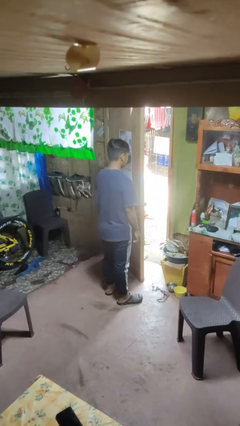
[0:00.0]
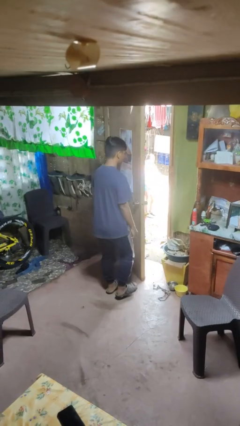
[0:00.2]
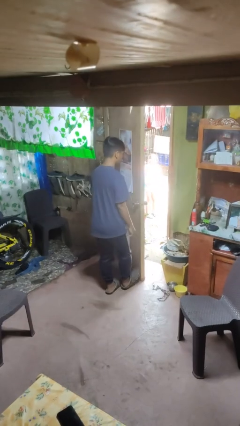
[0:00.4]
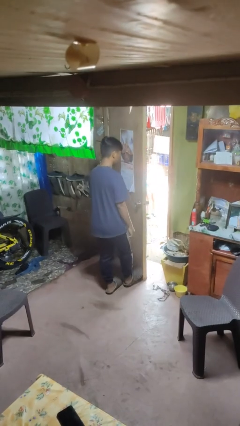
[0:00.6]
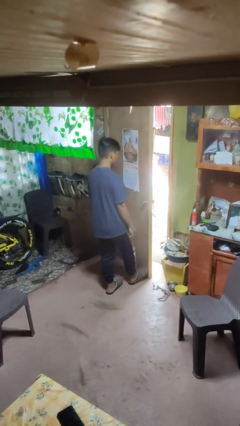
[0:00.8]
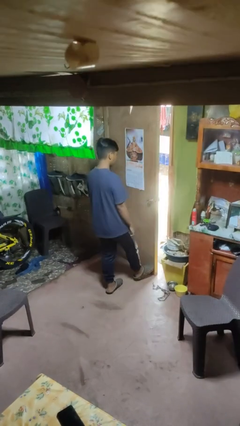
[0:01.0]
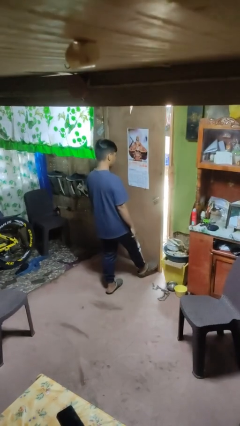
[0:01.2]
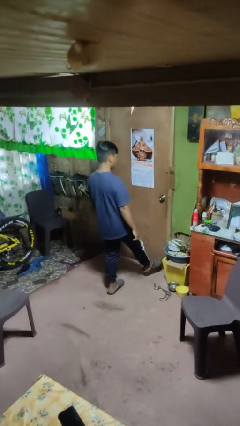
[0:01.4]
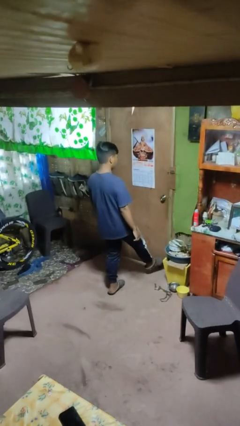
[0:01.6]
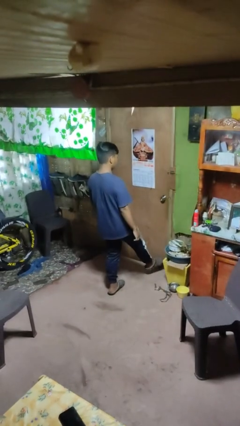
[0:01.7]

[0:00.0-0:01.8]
person closes door with foot

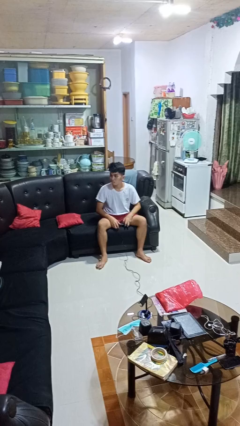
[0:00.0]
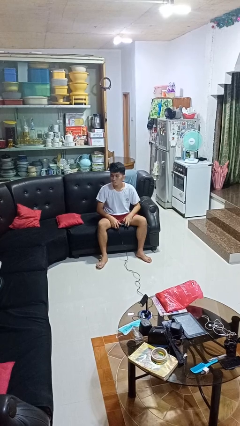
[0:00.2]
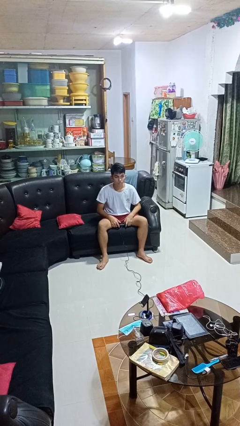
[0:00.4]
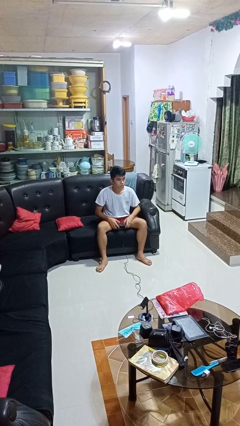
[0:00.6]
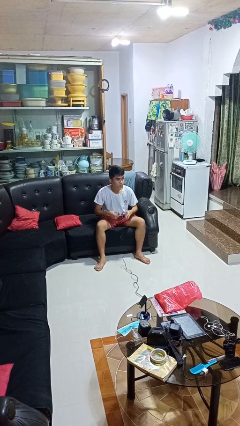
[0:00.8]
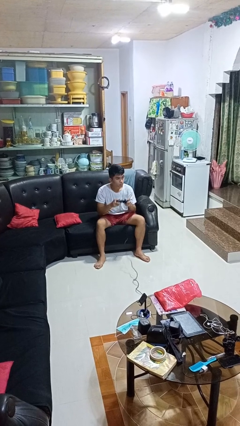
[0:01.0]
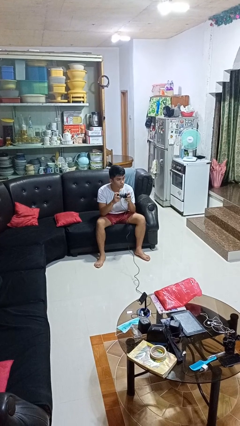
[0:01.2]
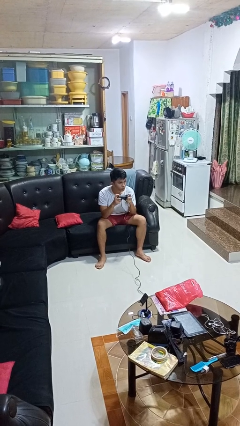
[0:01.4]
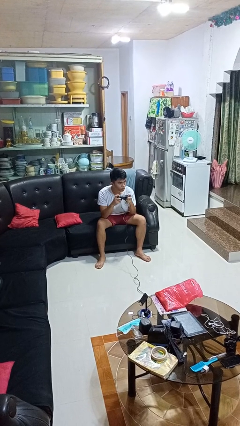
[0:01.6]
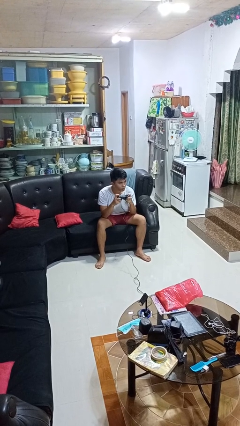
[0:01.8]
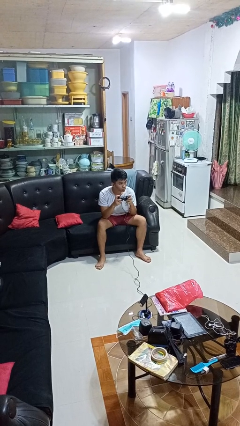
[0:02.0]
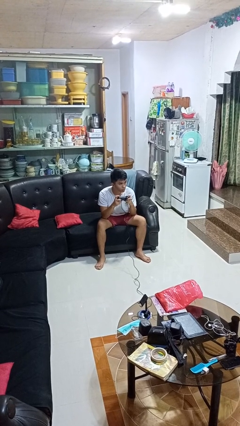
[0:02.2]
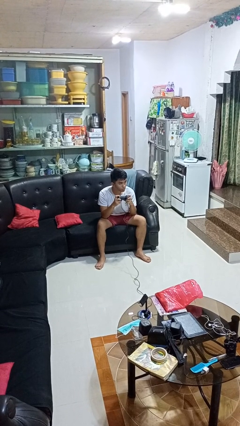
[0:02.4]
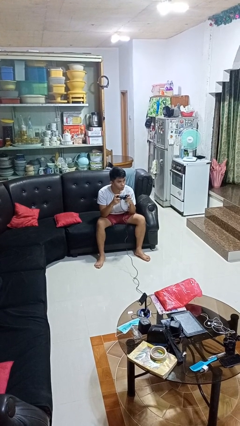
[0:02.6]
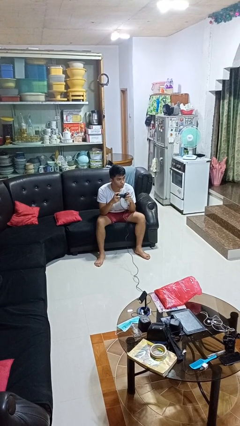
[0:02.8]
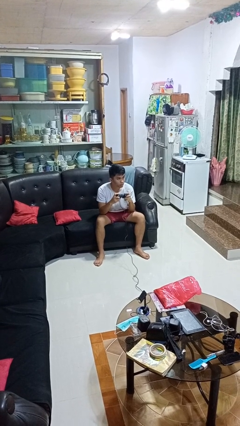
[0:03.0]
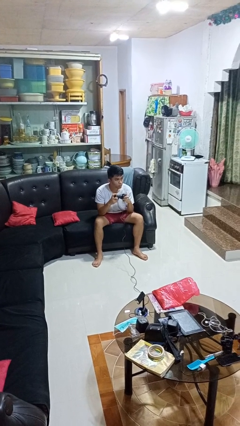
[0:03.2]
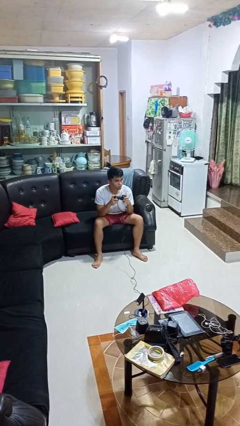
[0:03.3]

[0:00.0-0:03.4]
person interacts with handheld game

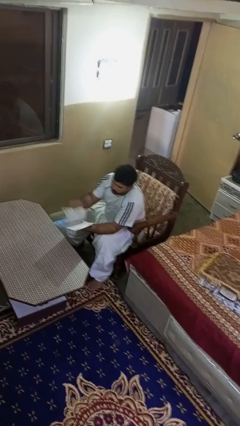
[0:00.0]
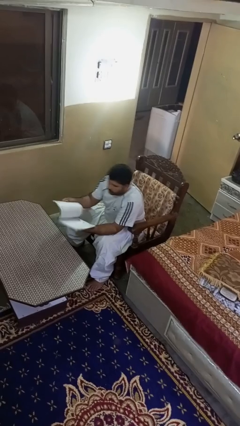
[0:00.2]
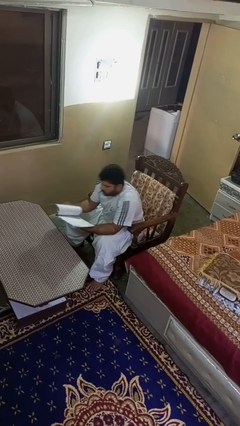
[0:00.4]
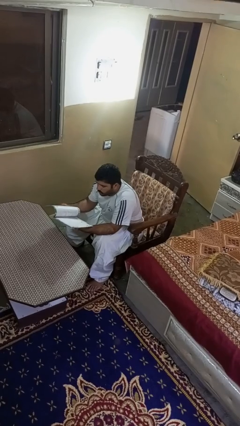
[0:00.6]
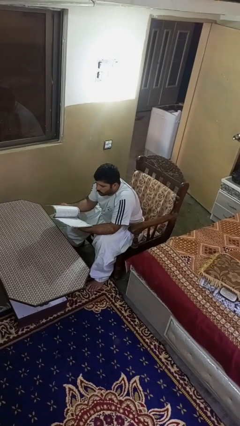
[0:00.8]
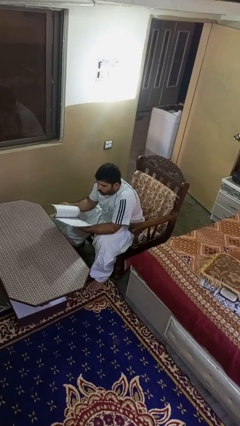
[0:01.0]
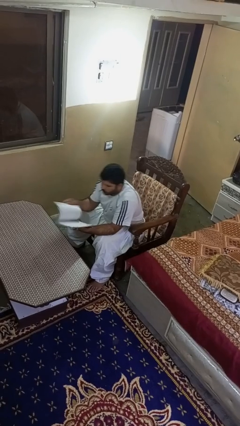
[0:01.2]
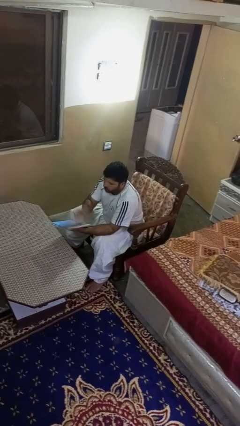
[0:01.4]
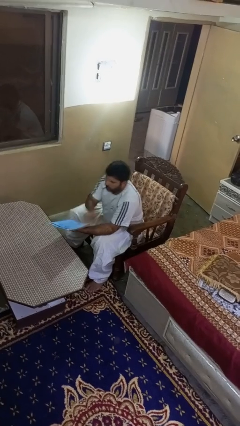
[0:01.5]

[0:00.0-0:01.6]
person reads magazine

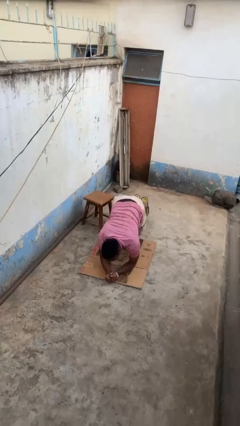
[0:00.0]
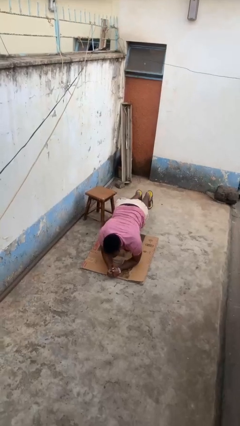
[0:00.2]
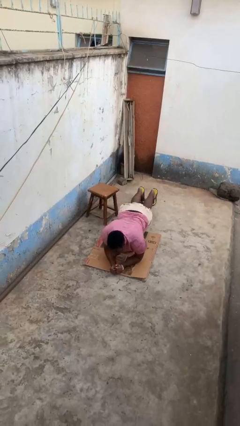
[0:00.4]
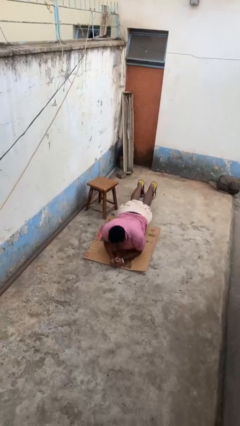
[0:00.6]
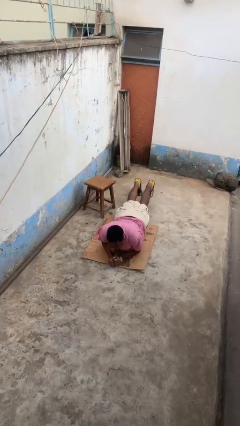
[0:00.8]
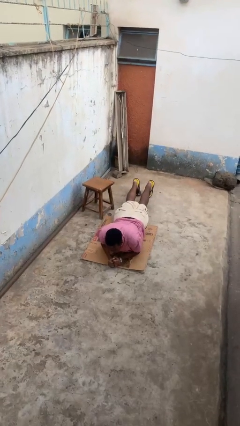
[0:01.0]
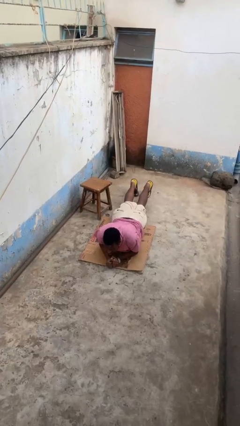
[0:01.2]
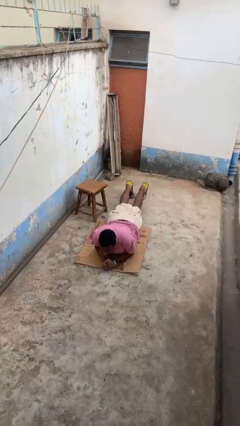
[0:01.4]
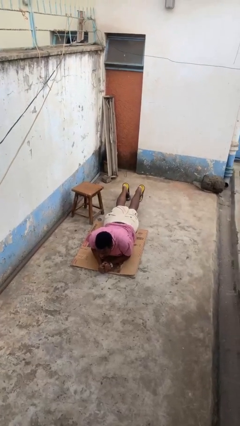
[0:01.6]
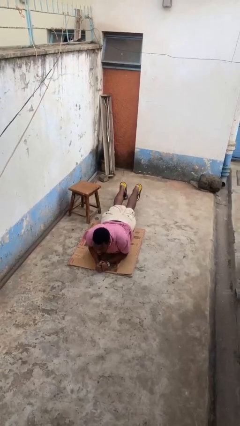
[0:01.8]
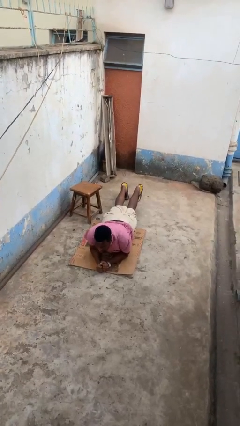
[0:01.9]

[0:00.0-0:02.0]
person lies down on floor

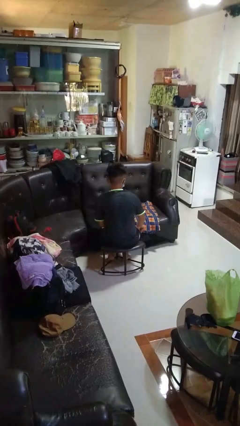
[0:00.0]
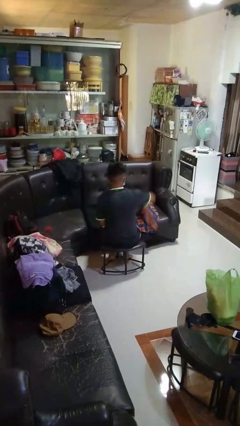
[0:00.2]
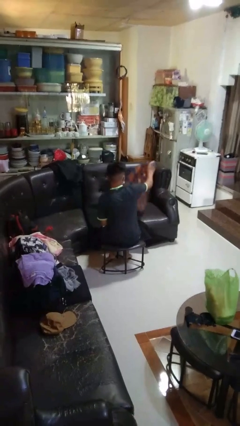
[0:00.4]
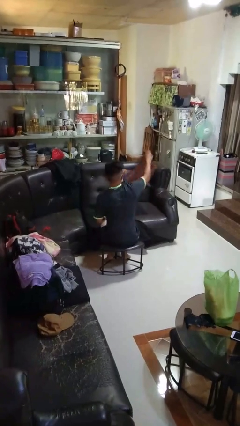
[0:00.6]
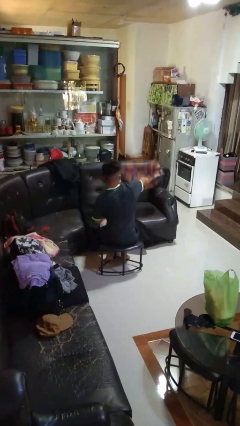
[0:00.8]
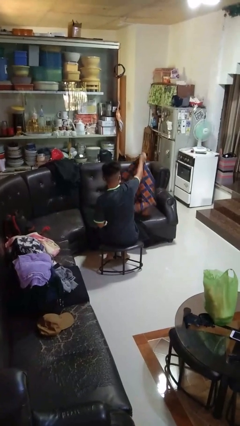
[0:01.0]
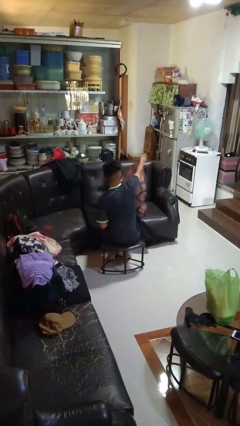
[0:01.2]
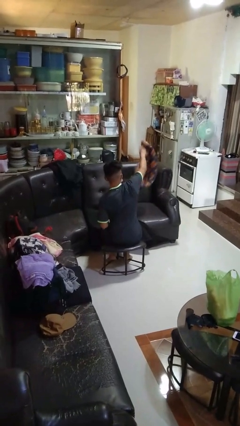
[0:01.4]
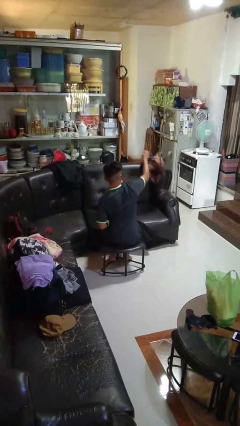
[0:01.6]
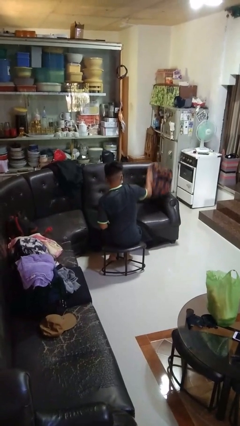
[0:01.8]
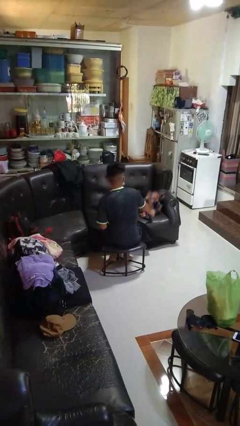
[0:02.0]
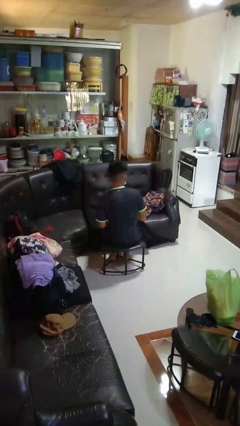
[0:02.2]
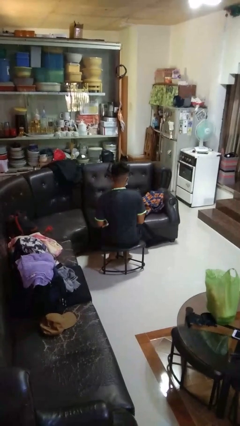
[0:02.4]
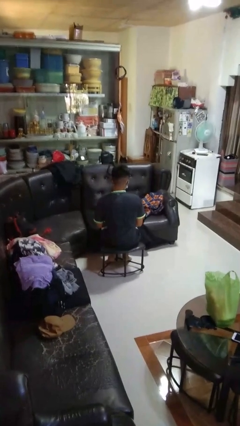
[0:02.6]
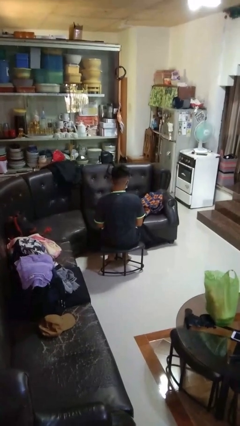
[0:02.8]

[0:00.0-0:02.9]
person unfolds blanket

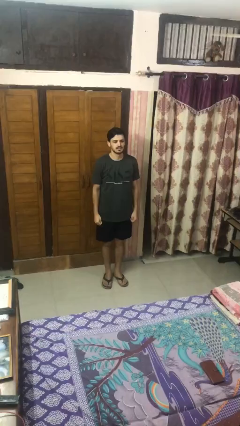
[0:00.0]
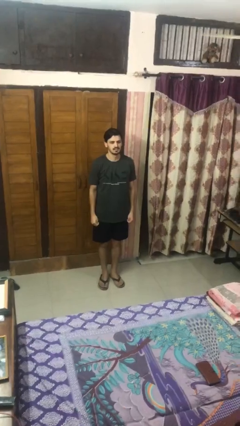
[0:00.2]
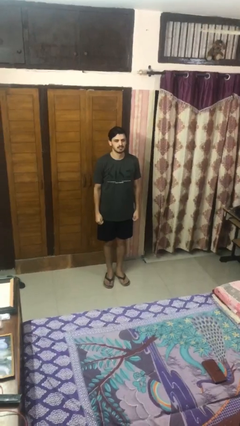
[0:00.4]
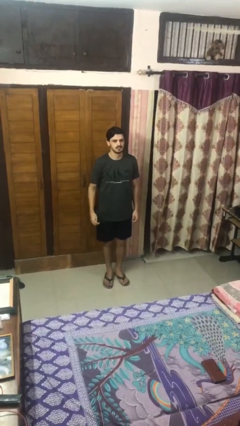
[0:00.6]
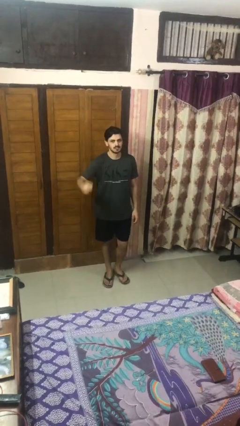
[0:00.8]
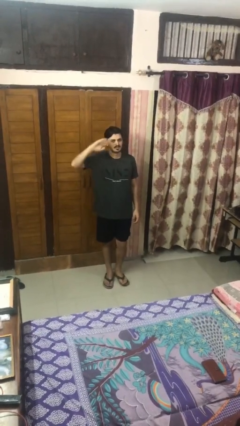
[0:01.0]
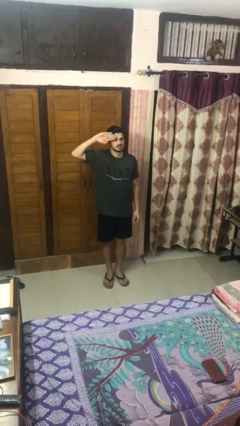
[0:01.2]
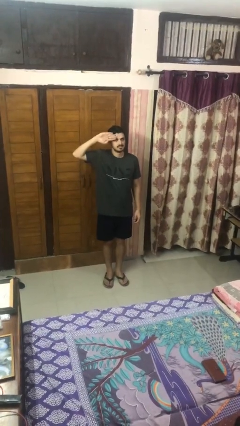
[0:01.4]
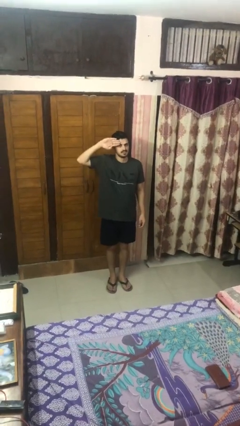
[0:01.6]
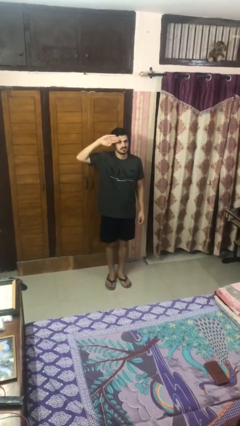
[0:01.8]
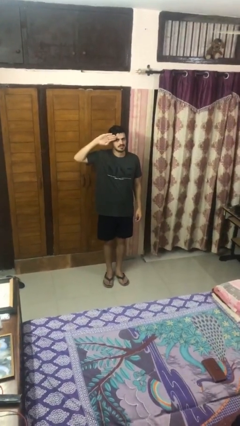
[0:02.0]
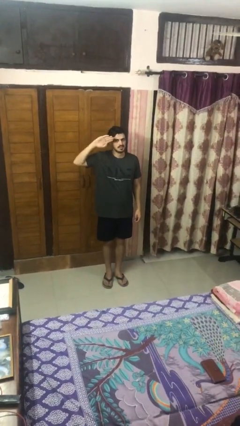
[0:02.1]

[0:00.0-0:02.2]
person salutes

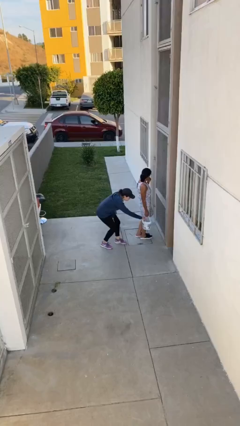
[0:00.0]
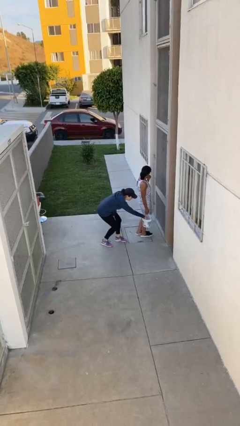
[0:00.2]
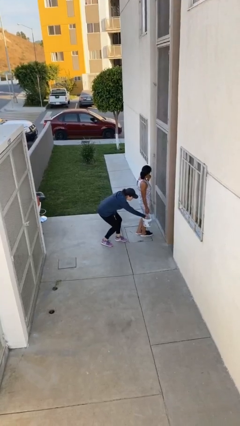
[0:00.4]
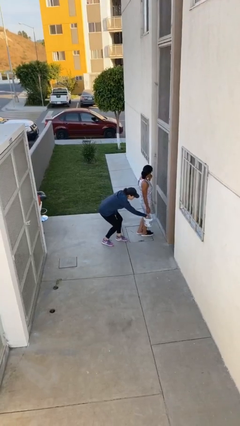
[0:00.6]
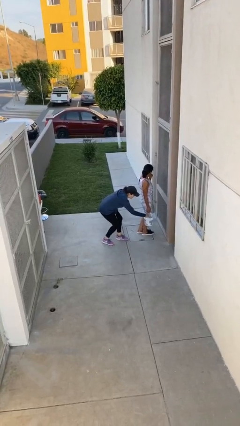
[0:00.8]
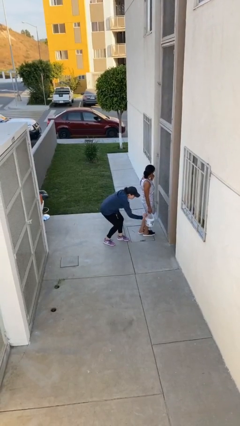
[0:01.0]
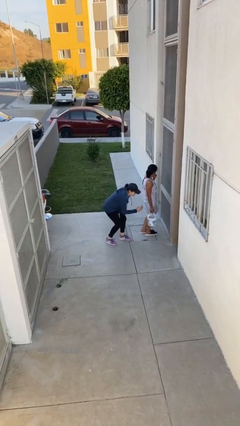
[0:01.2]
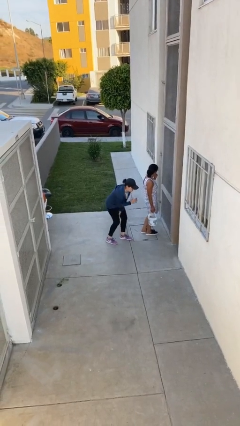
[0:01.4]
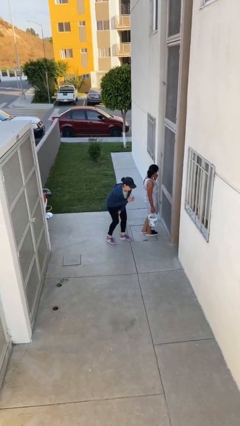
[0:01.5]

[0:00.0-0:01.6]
person steals object from person

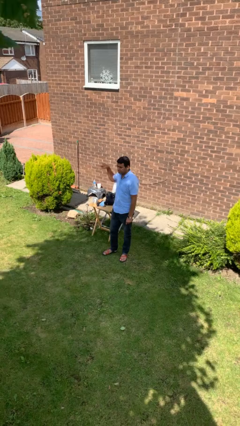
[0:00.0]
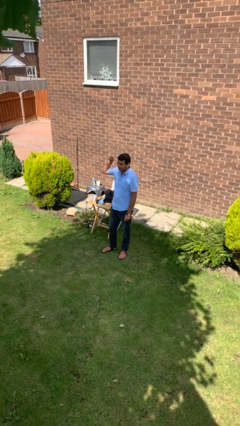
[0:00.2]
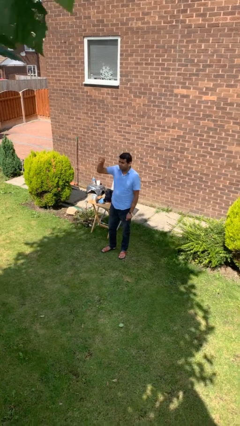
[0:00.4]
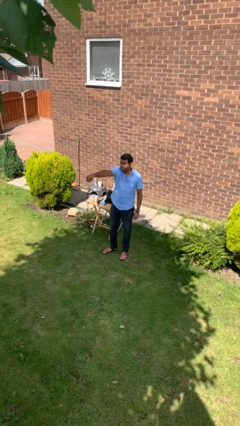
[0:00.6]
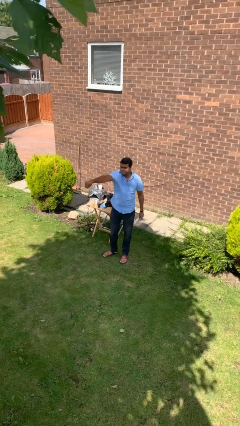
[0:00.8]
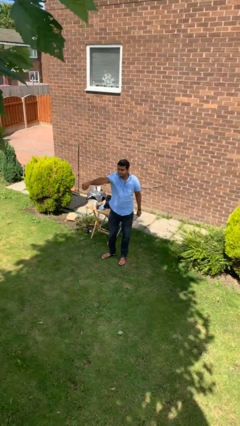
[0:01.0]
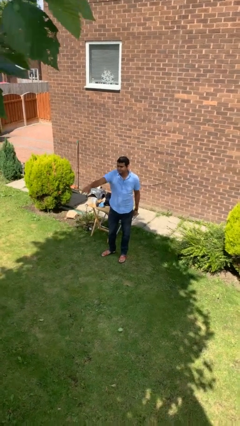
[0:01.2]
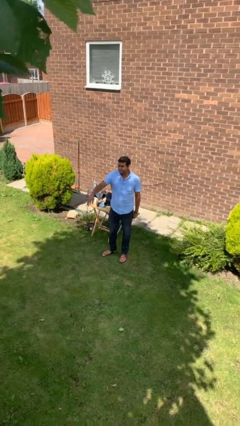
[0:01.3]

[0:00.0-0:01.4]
person punches

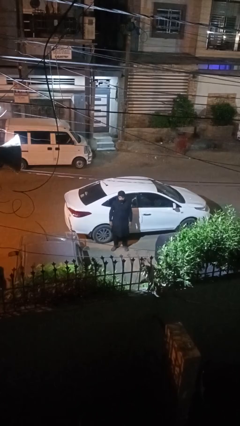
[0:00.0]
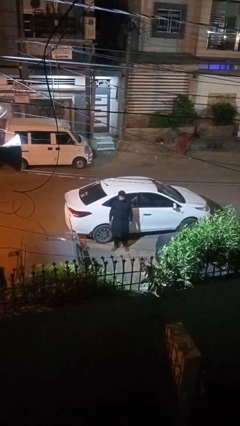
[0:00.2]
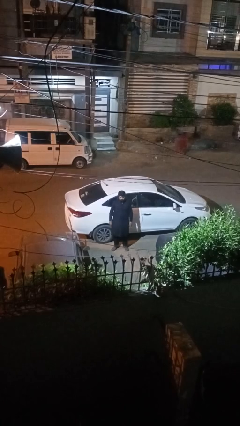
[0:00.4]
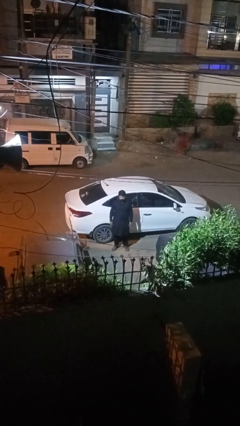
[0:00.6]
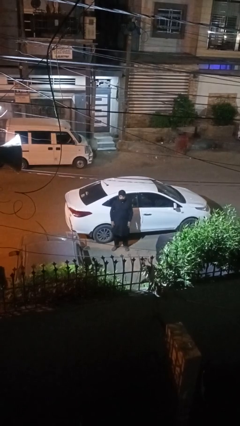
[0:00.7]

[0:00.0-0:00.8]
person blows into hands
